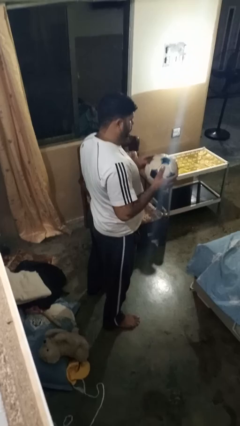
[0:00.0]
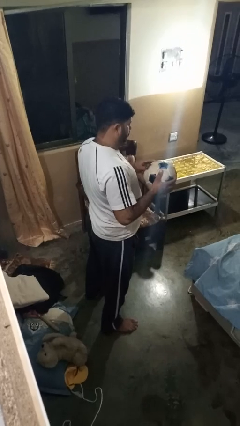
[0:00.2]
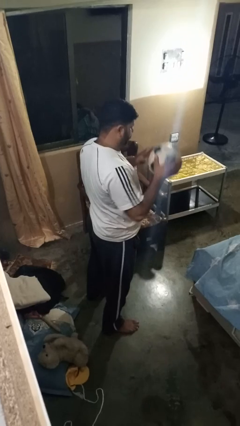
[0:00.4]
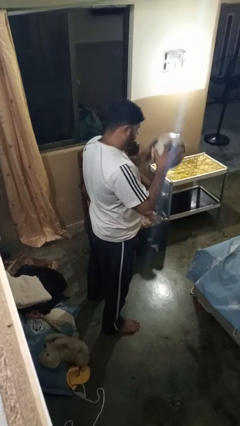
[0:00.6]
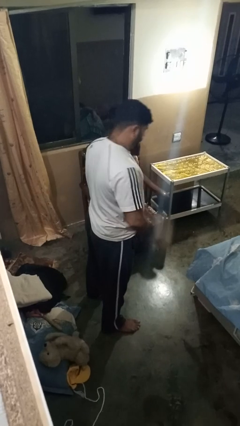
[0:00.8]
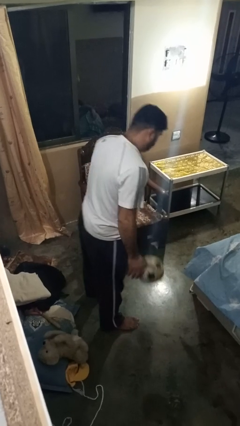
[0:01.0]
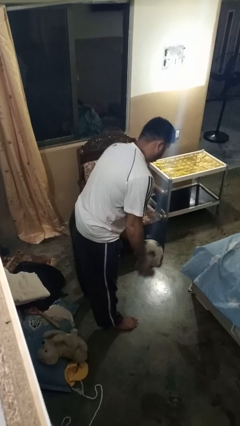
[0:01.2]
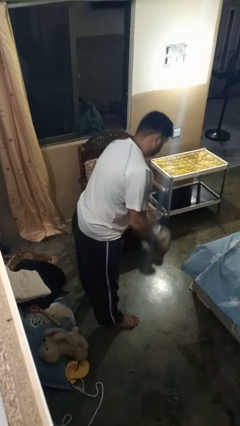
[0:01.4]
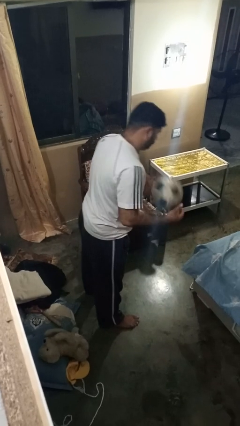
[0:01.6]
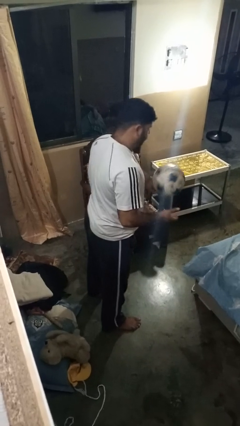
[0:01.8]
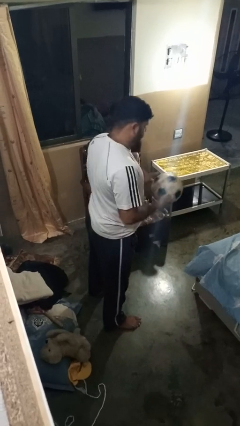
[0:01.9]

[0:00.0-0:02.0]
person bounces ball on floor

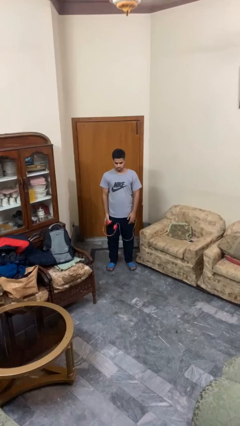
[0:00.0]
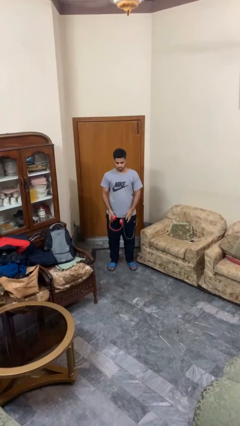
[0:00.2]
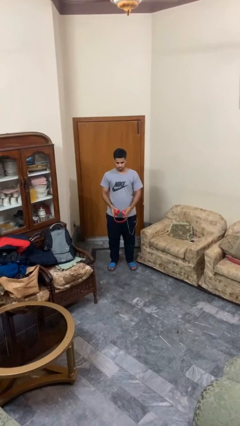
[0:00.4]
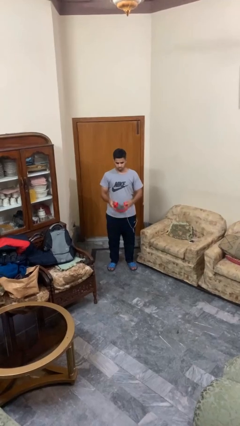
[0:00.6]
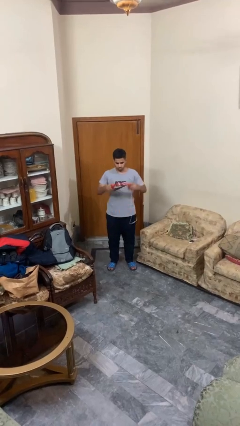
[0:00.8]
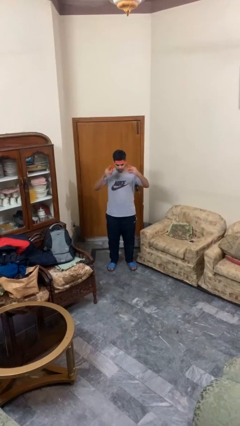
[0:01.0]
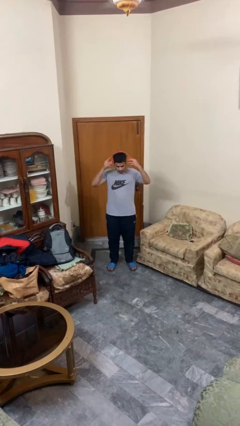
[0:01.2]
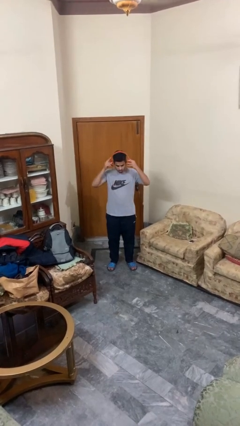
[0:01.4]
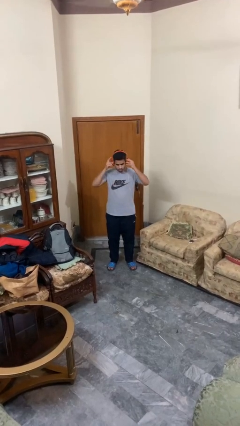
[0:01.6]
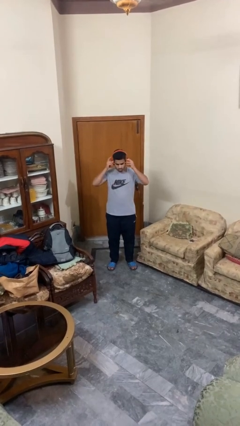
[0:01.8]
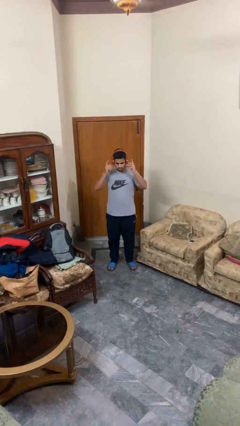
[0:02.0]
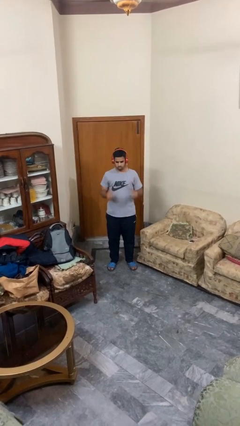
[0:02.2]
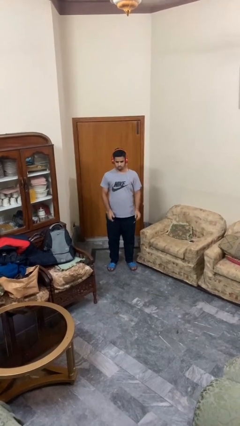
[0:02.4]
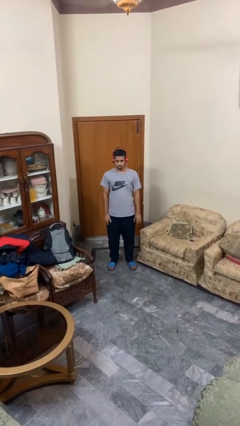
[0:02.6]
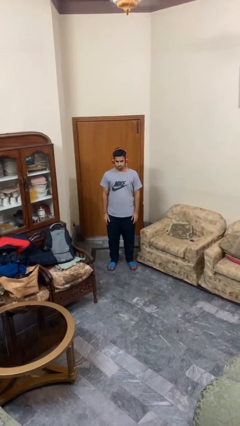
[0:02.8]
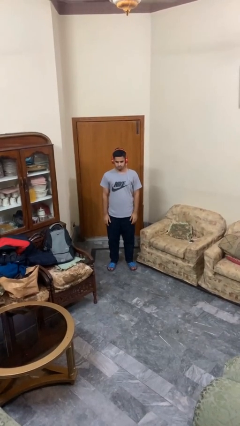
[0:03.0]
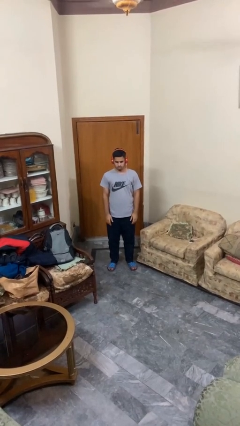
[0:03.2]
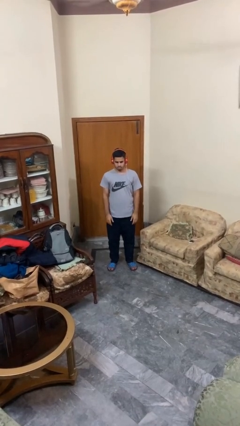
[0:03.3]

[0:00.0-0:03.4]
person puts on headphones

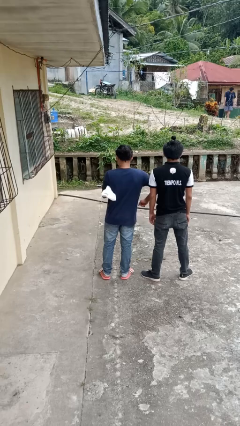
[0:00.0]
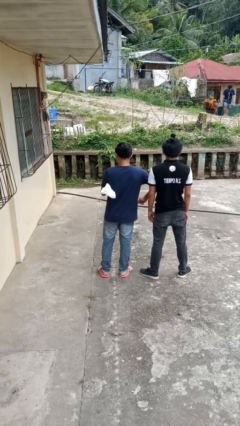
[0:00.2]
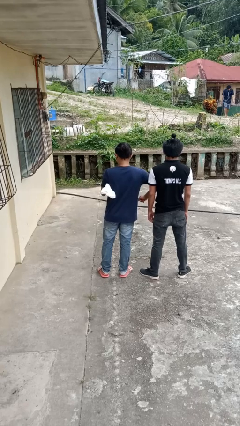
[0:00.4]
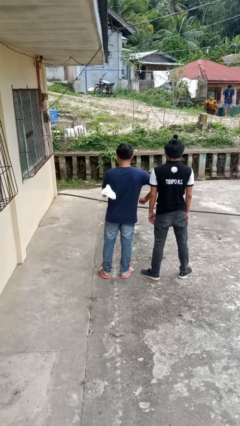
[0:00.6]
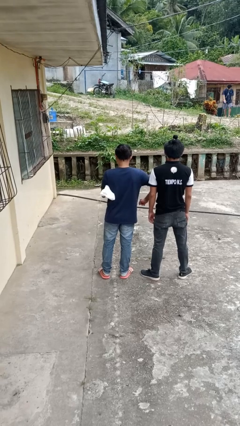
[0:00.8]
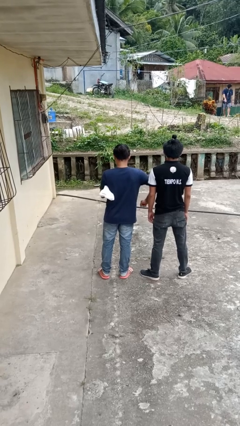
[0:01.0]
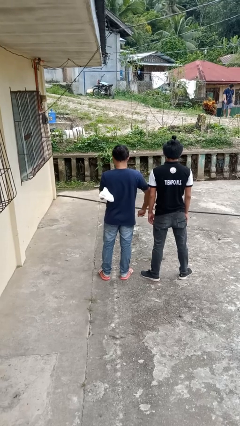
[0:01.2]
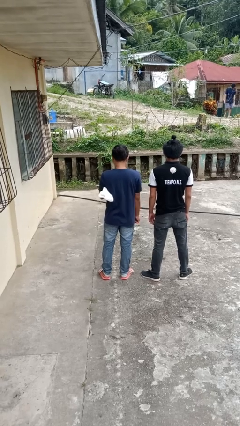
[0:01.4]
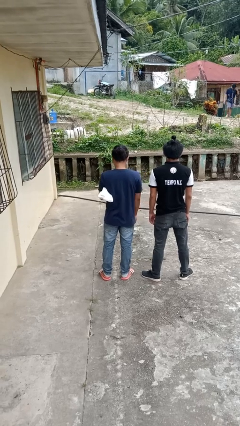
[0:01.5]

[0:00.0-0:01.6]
person nudges person with elbow

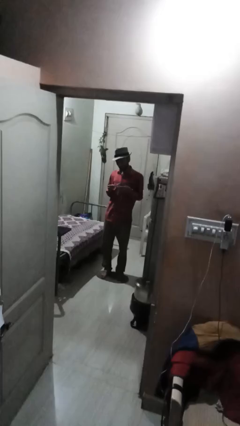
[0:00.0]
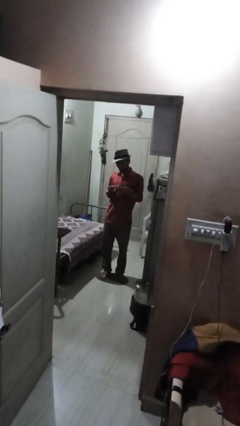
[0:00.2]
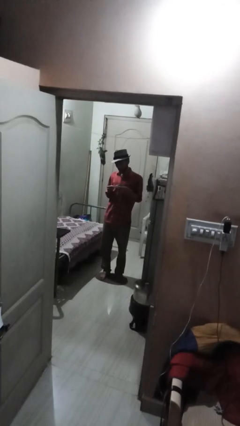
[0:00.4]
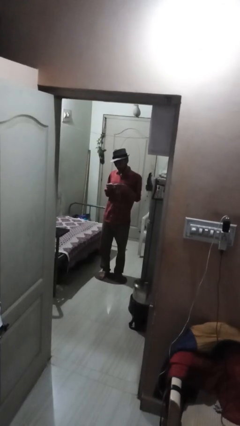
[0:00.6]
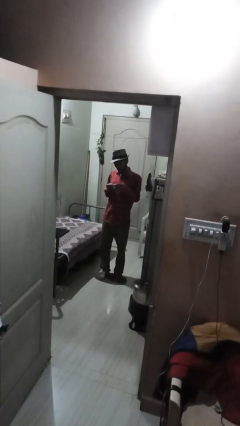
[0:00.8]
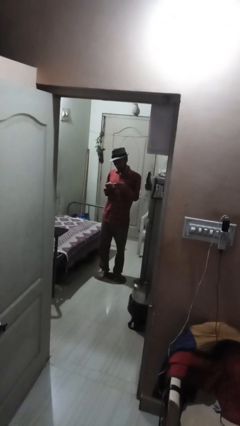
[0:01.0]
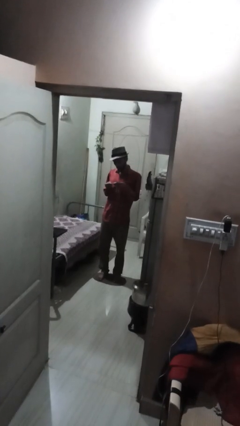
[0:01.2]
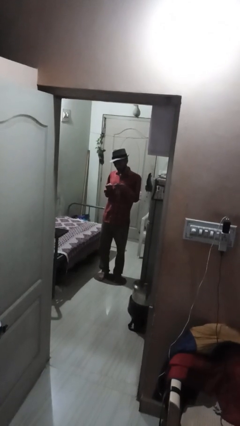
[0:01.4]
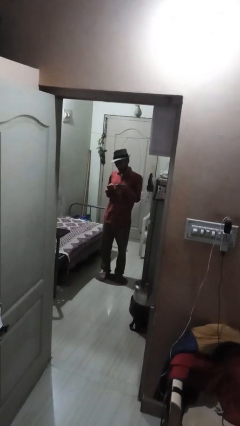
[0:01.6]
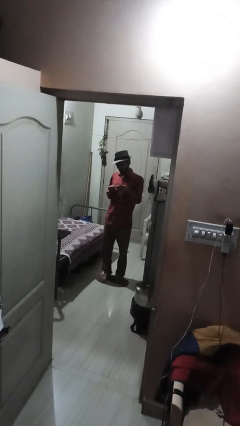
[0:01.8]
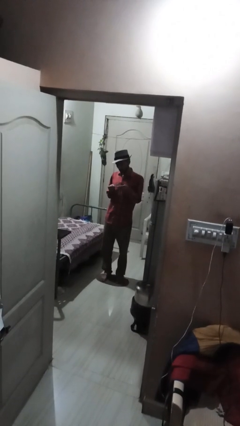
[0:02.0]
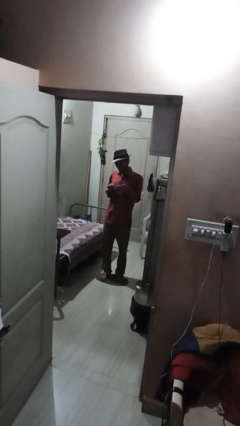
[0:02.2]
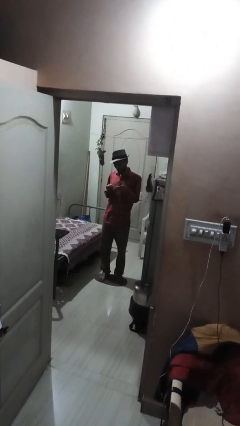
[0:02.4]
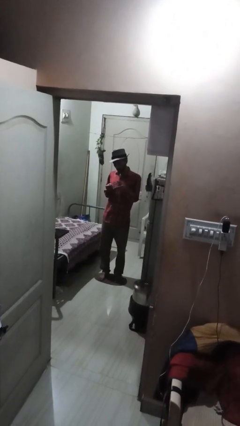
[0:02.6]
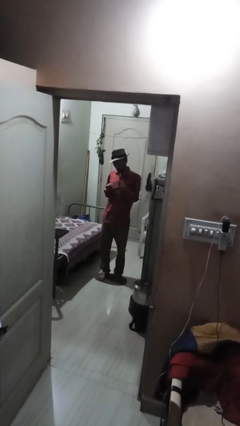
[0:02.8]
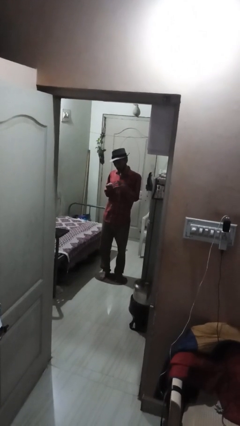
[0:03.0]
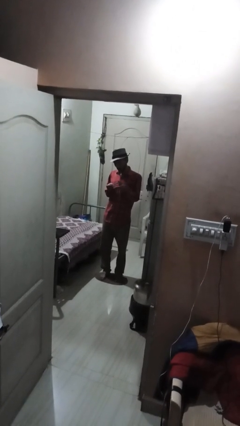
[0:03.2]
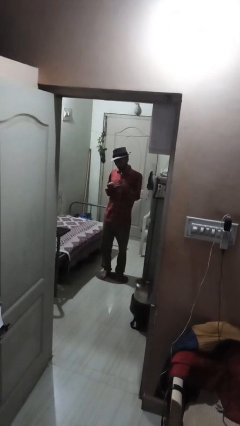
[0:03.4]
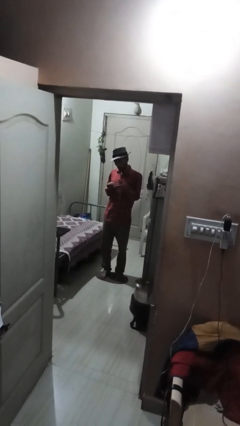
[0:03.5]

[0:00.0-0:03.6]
person clips fingernails

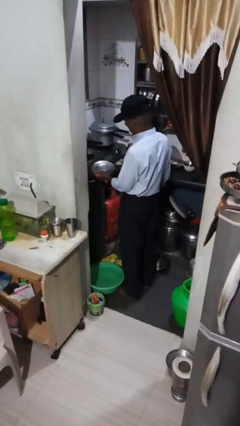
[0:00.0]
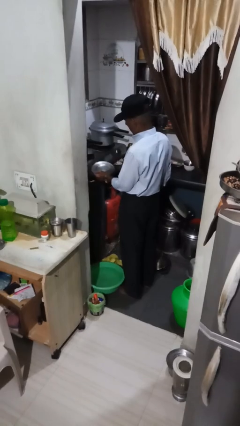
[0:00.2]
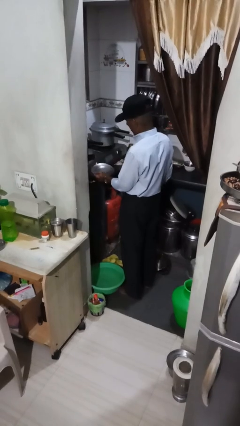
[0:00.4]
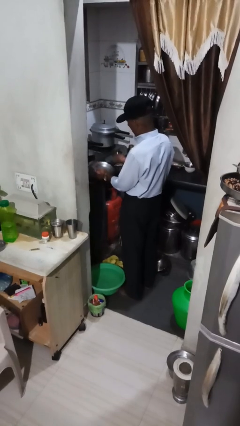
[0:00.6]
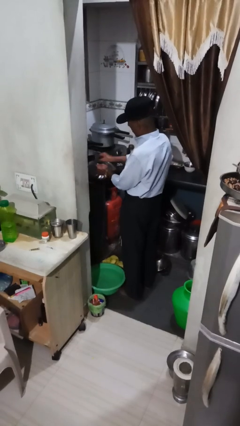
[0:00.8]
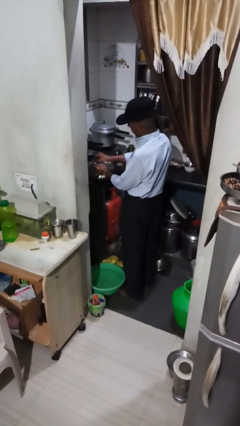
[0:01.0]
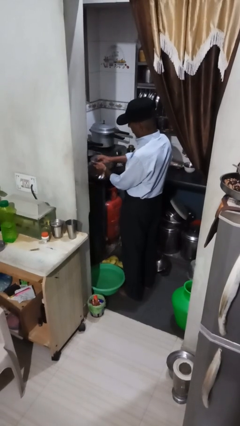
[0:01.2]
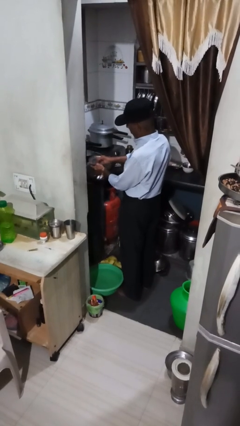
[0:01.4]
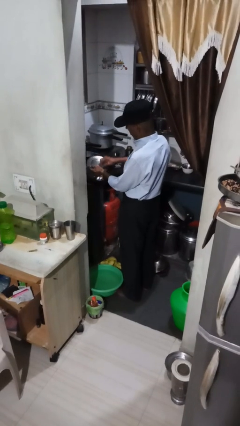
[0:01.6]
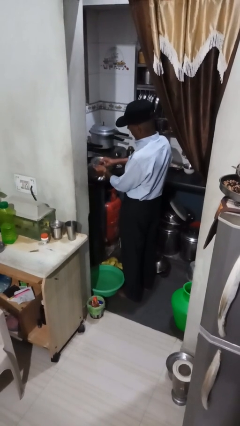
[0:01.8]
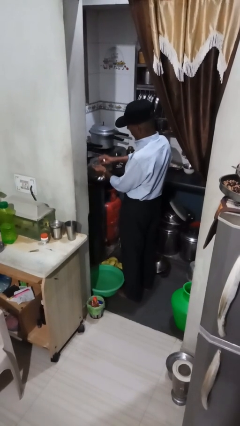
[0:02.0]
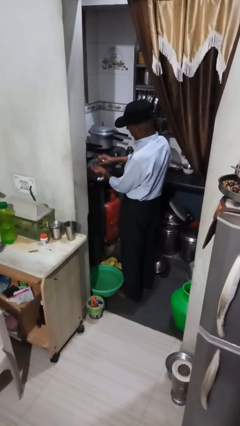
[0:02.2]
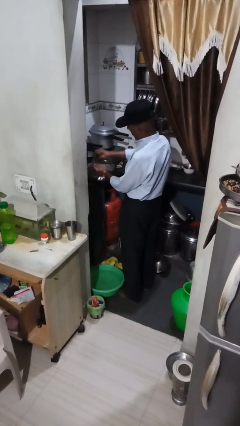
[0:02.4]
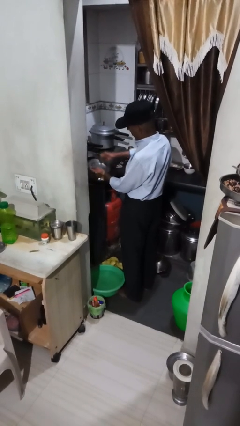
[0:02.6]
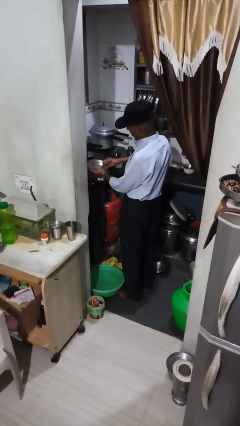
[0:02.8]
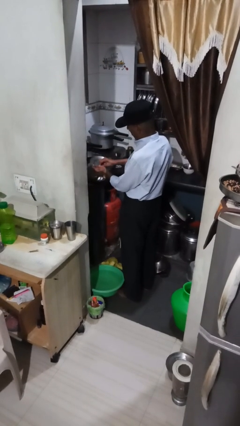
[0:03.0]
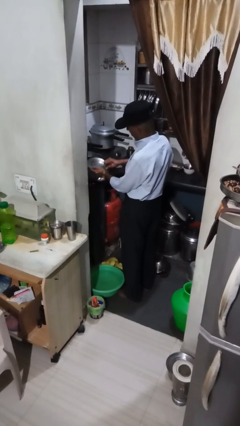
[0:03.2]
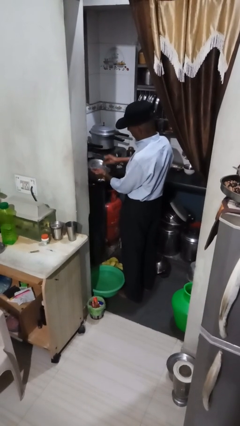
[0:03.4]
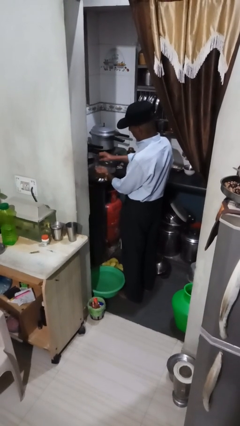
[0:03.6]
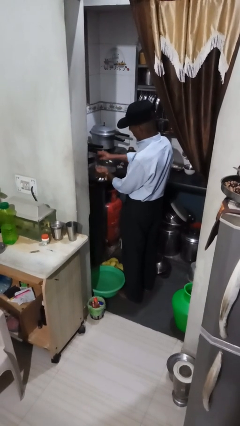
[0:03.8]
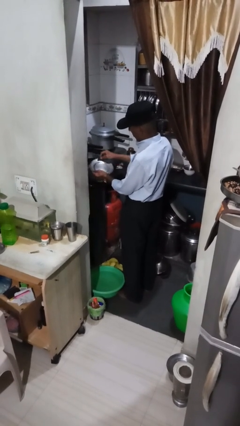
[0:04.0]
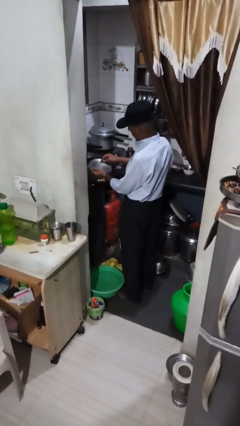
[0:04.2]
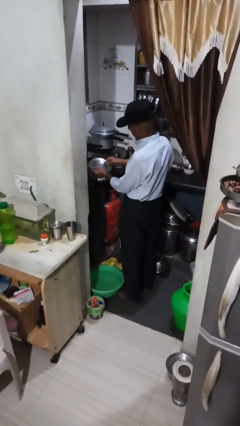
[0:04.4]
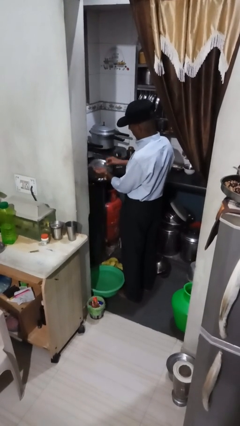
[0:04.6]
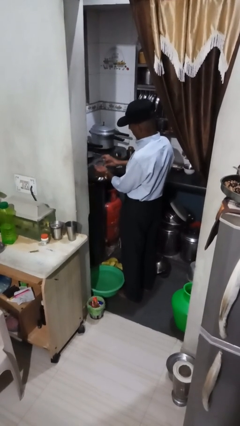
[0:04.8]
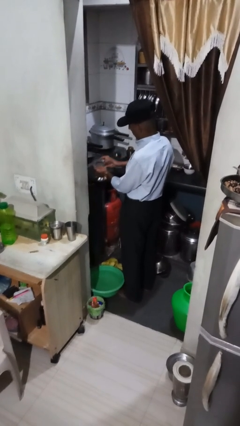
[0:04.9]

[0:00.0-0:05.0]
person washes dish

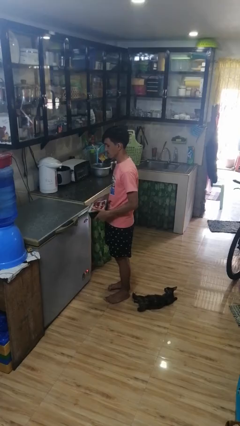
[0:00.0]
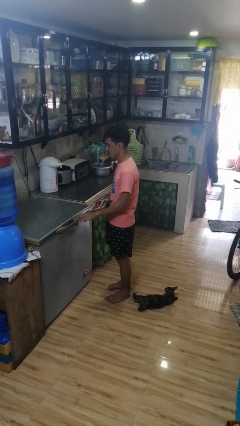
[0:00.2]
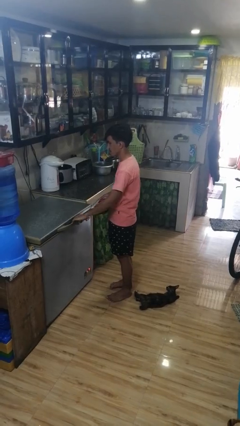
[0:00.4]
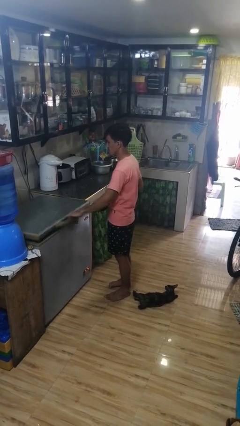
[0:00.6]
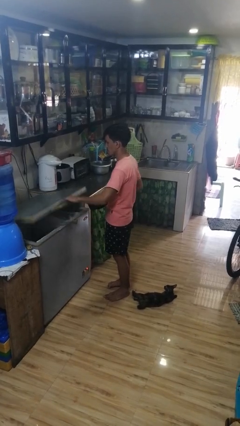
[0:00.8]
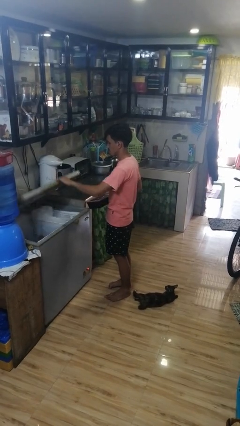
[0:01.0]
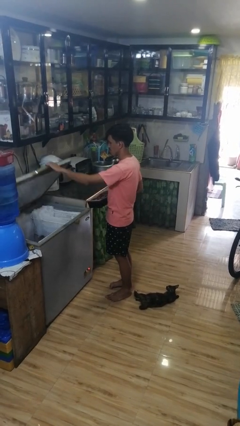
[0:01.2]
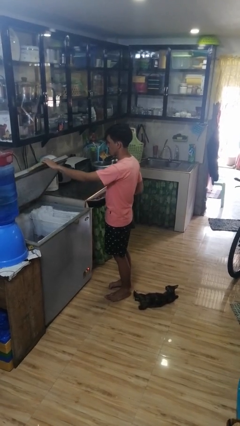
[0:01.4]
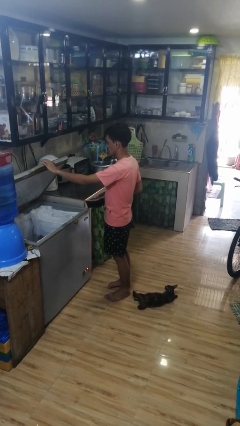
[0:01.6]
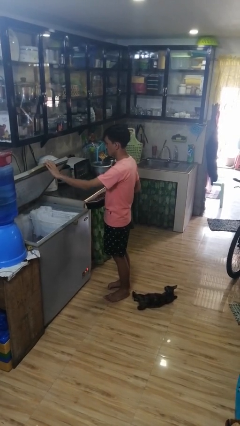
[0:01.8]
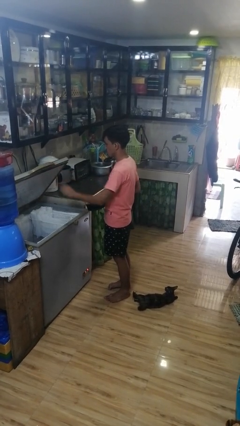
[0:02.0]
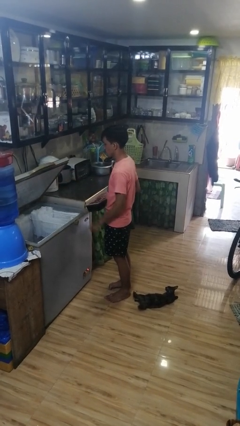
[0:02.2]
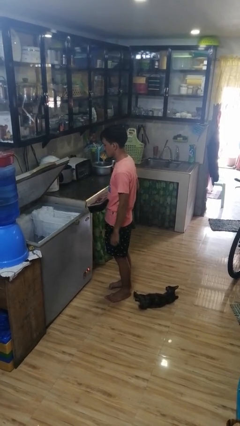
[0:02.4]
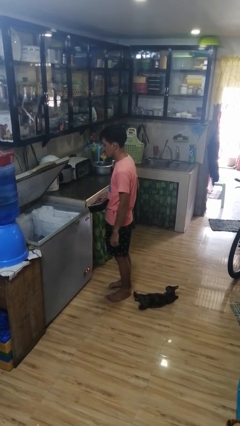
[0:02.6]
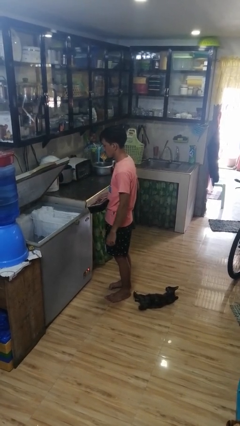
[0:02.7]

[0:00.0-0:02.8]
person opens refrigerator
